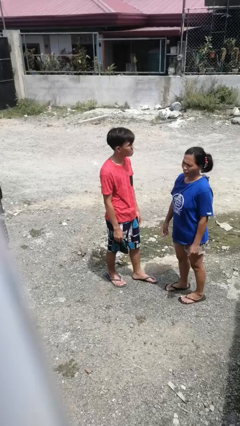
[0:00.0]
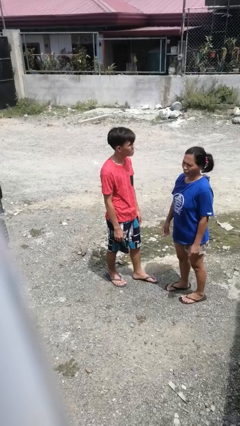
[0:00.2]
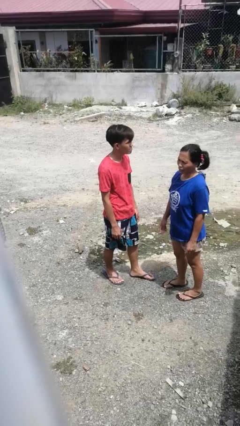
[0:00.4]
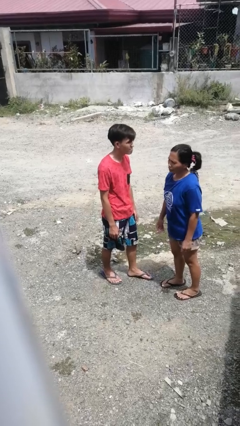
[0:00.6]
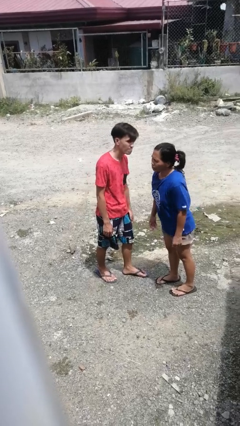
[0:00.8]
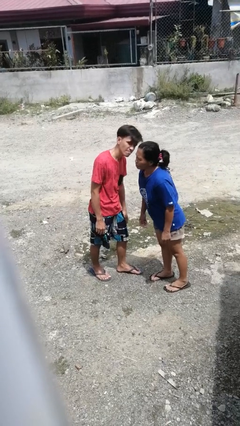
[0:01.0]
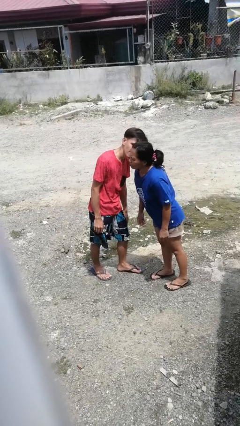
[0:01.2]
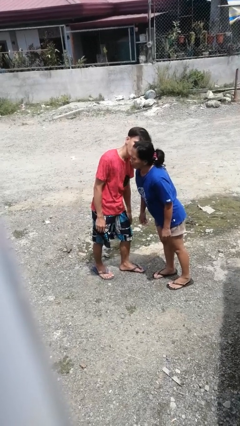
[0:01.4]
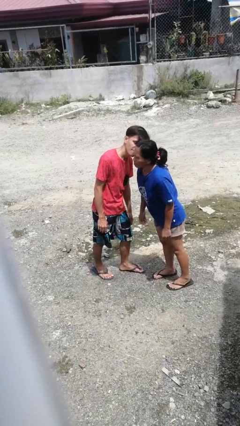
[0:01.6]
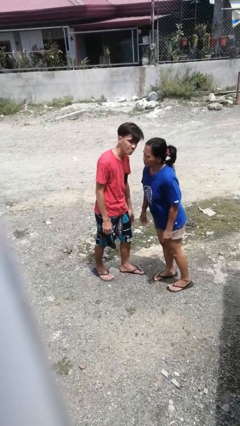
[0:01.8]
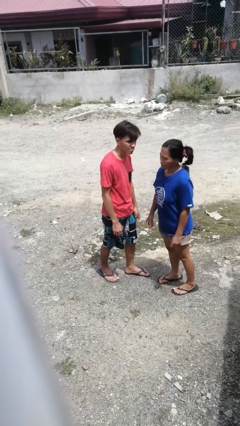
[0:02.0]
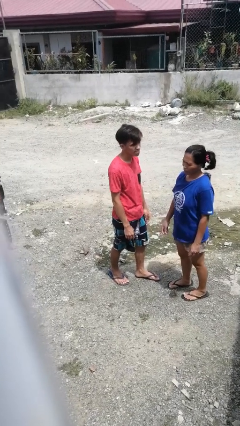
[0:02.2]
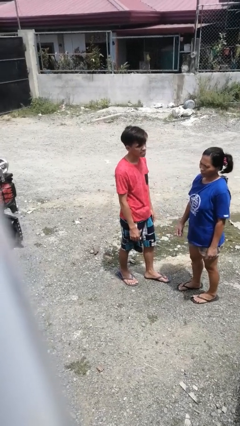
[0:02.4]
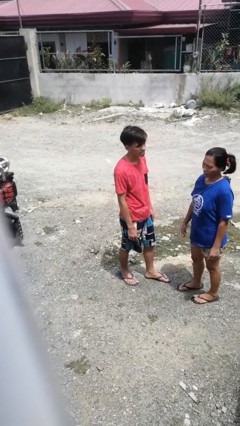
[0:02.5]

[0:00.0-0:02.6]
person kisses cheek of person

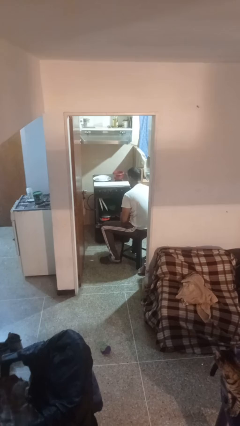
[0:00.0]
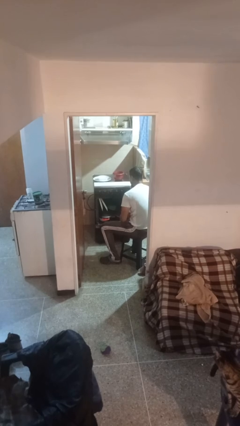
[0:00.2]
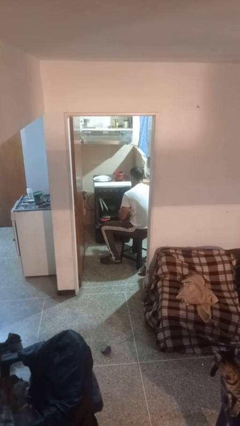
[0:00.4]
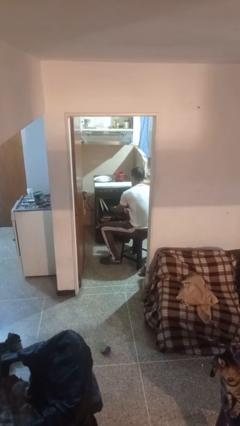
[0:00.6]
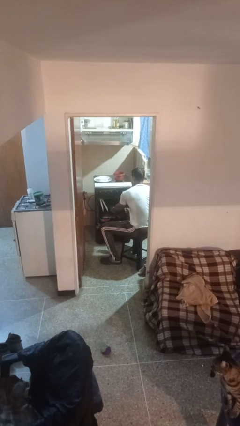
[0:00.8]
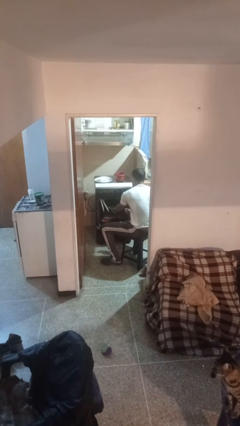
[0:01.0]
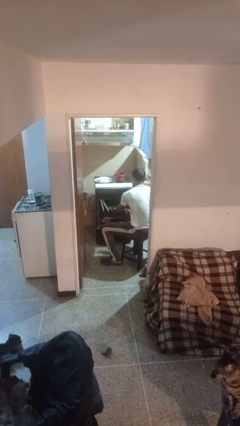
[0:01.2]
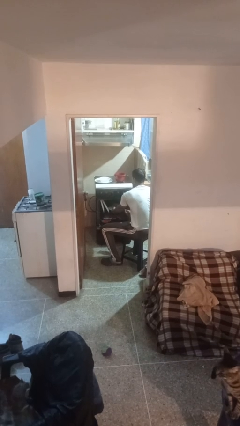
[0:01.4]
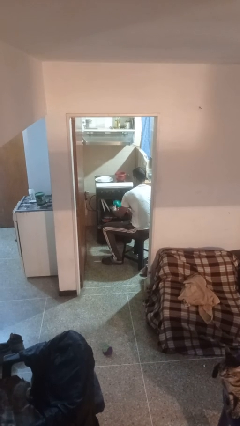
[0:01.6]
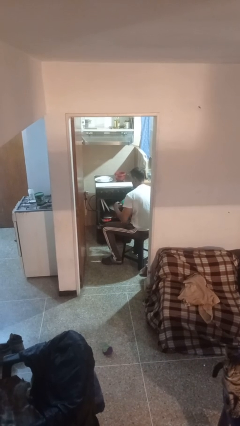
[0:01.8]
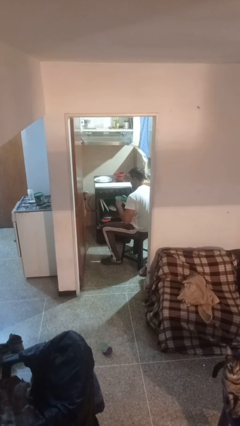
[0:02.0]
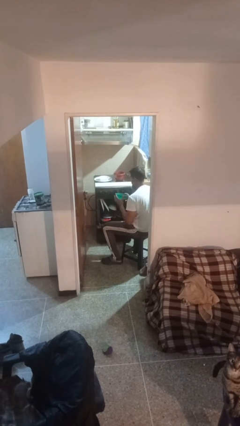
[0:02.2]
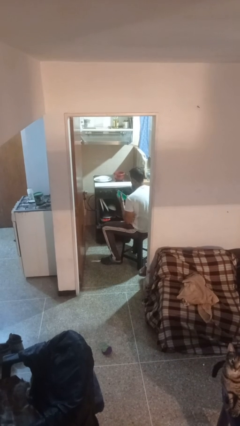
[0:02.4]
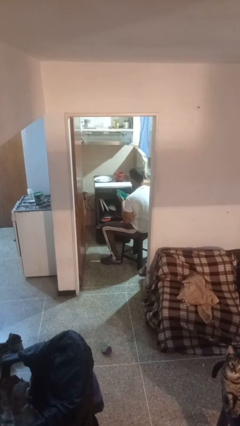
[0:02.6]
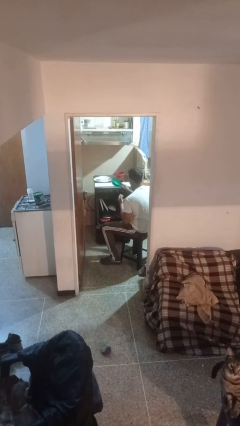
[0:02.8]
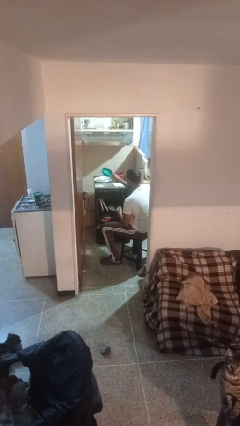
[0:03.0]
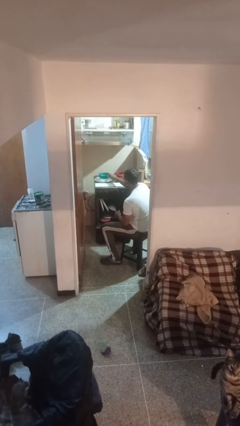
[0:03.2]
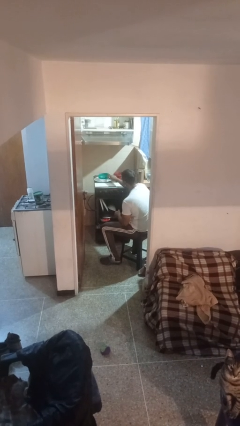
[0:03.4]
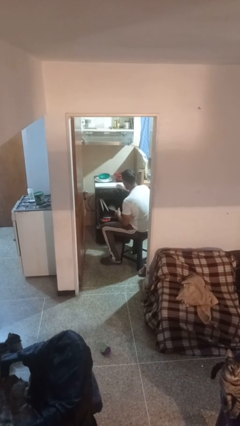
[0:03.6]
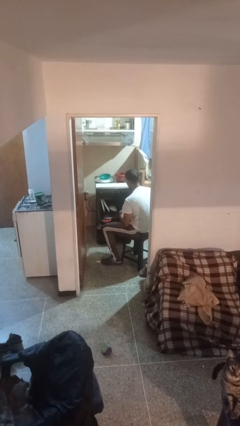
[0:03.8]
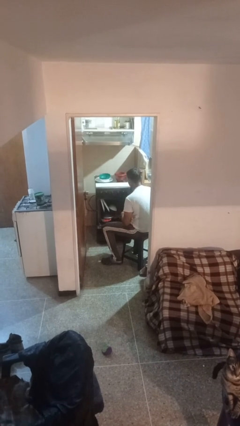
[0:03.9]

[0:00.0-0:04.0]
person unloads dishwasher

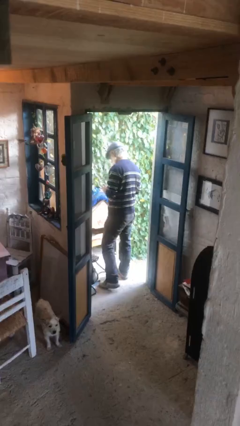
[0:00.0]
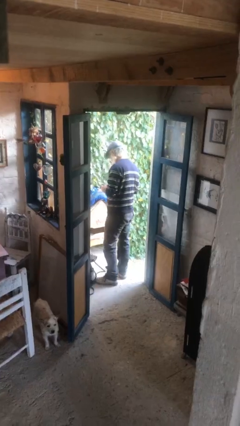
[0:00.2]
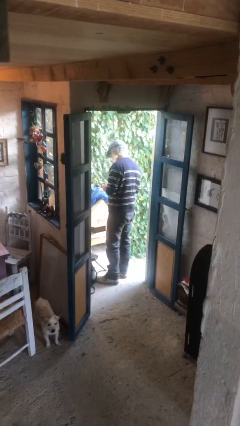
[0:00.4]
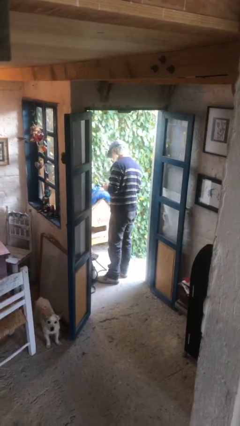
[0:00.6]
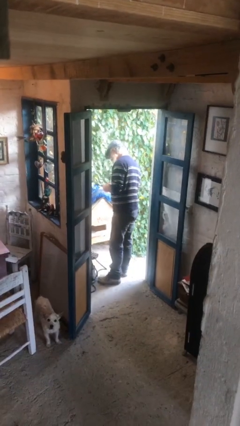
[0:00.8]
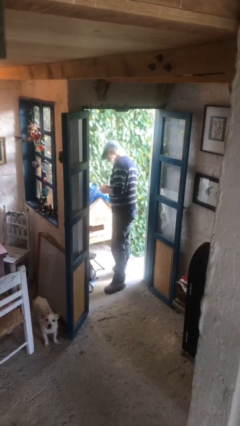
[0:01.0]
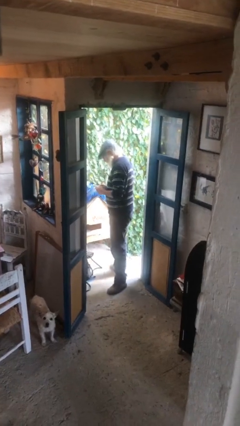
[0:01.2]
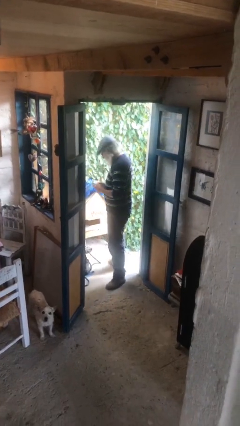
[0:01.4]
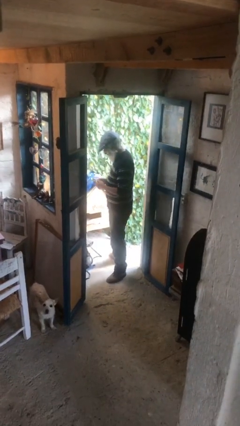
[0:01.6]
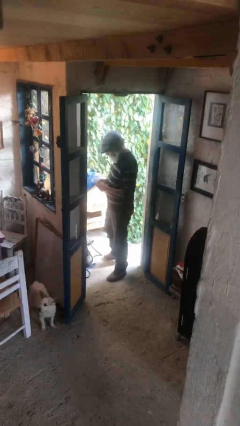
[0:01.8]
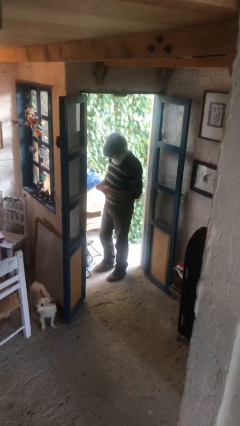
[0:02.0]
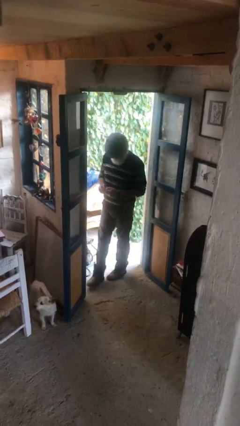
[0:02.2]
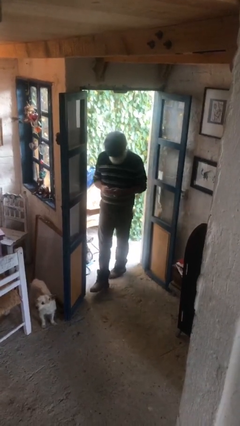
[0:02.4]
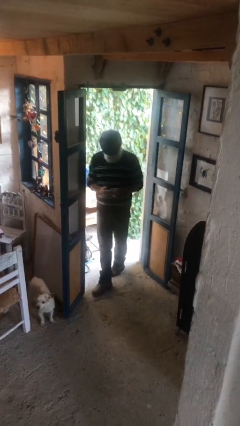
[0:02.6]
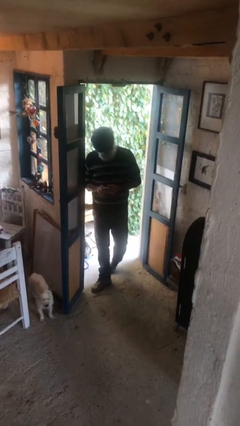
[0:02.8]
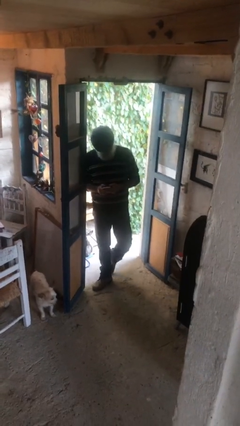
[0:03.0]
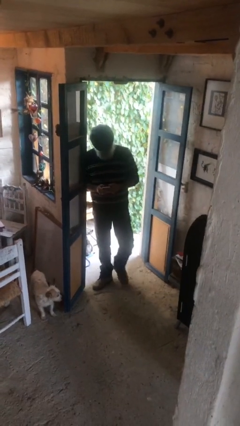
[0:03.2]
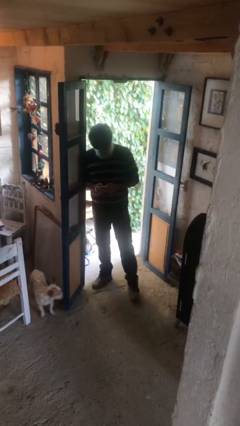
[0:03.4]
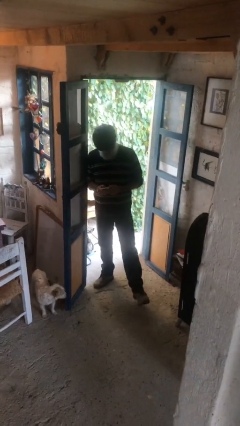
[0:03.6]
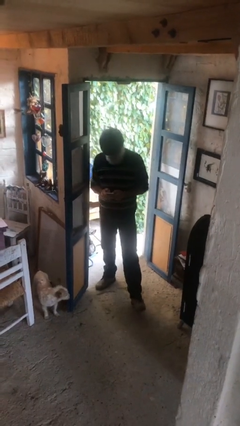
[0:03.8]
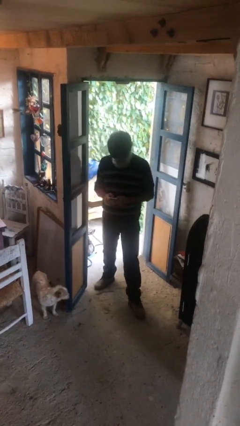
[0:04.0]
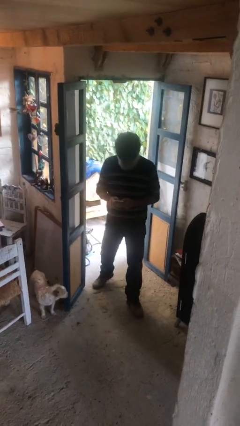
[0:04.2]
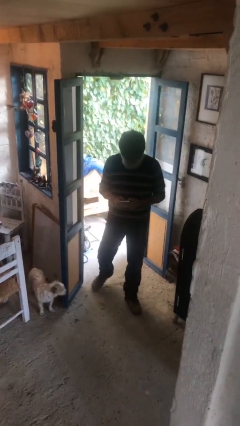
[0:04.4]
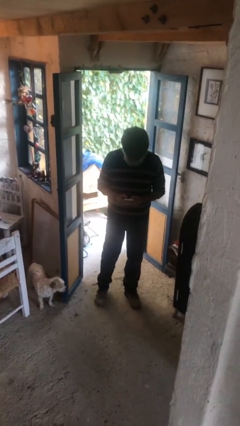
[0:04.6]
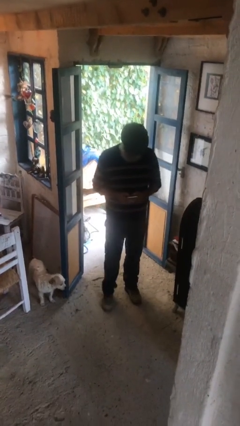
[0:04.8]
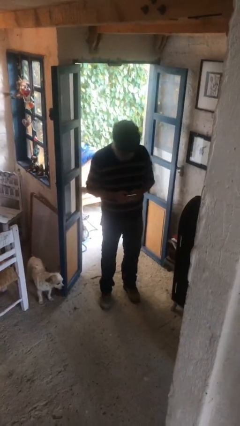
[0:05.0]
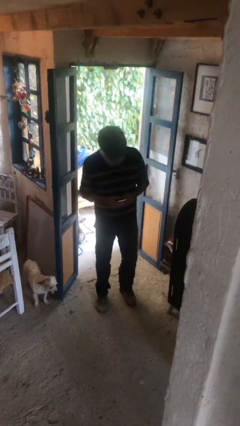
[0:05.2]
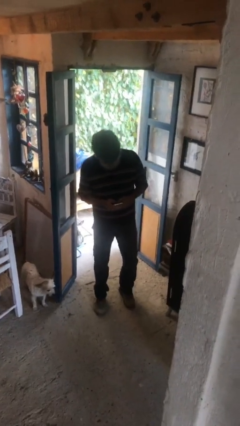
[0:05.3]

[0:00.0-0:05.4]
person enters scene through structure

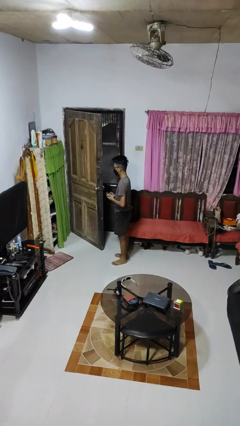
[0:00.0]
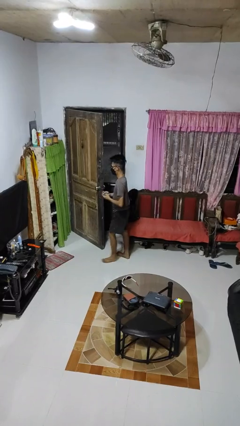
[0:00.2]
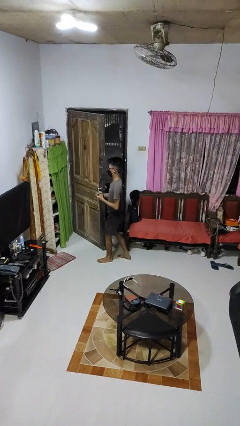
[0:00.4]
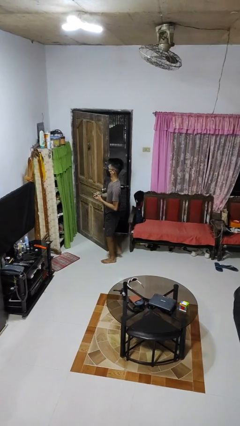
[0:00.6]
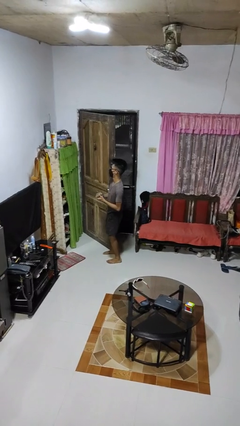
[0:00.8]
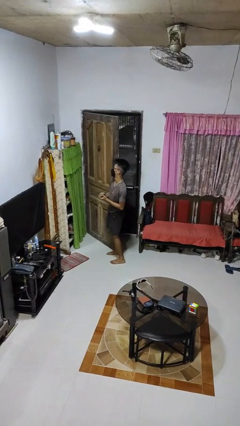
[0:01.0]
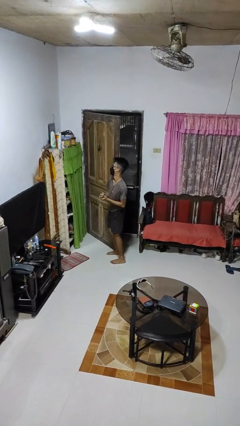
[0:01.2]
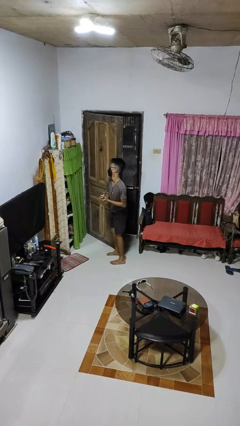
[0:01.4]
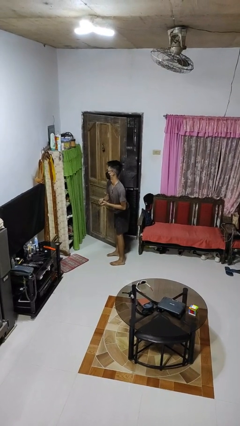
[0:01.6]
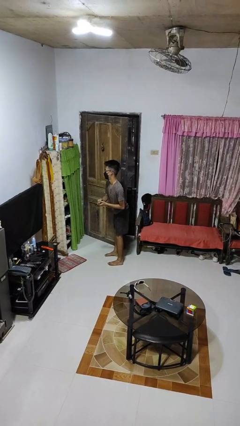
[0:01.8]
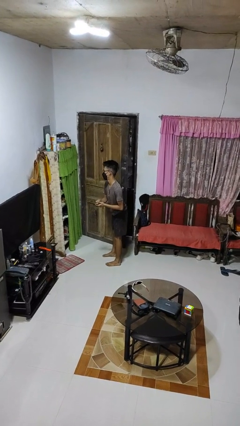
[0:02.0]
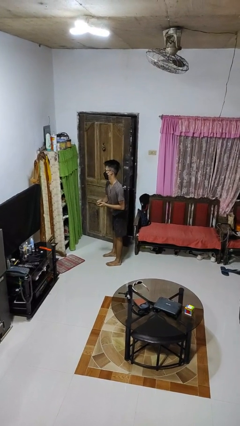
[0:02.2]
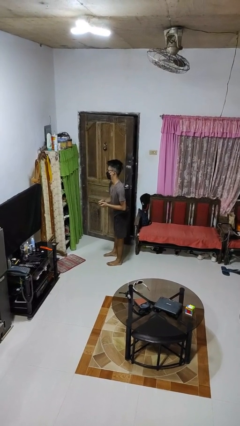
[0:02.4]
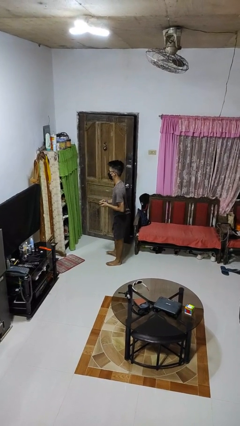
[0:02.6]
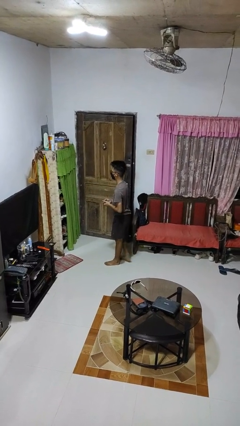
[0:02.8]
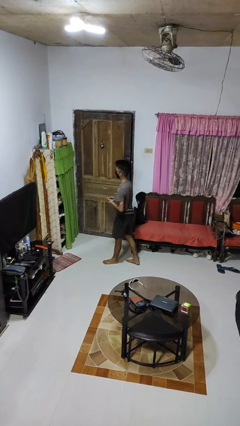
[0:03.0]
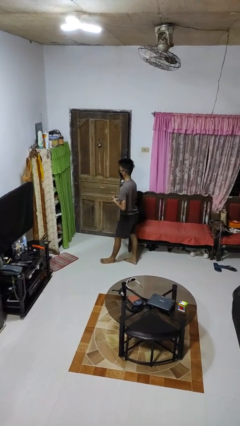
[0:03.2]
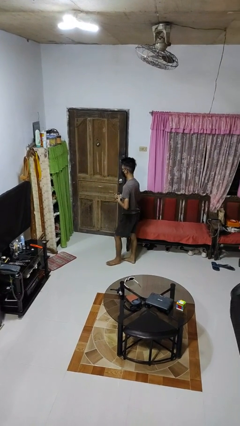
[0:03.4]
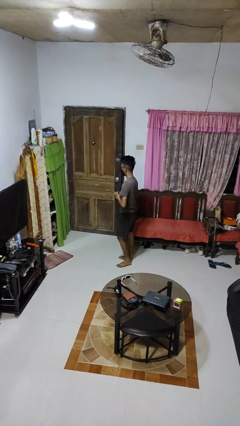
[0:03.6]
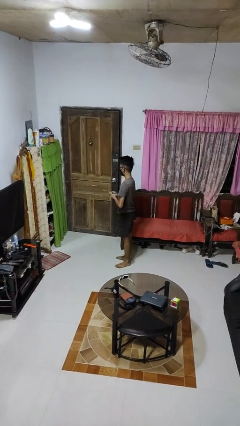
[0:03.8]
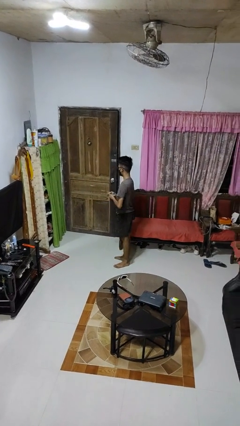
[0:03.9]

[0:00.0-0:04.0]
person closes door with hip

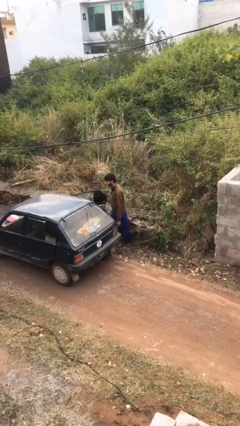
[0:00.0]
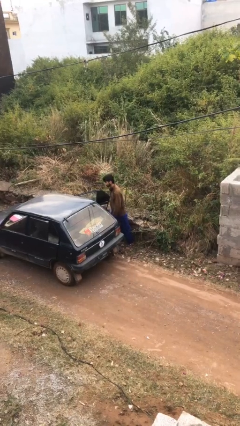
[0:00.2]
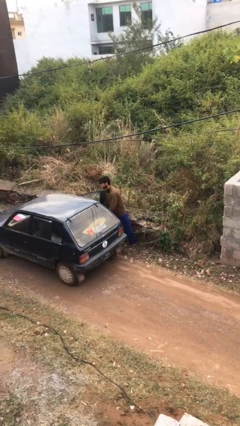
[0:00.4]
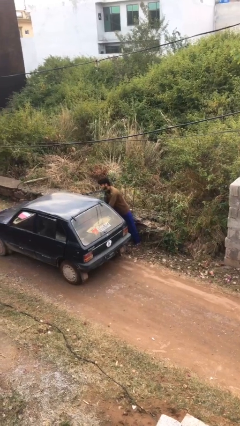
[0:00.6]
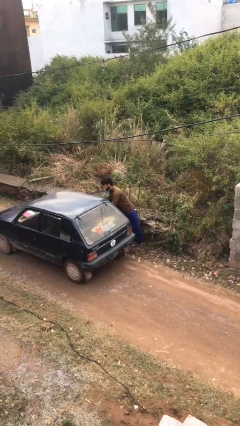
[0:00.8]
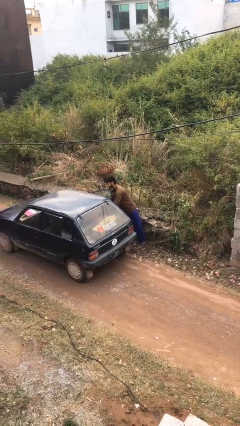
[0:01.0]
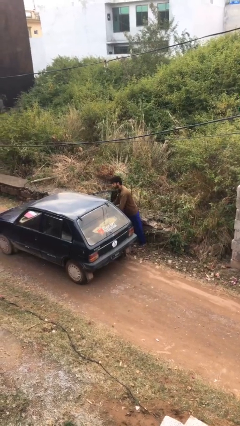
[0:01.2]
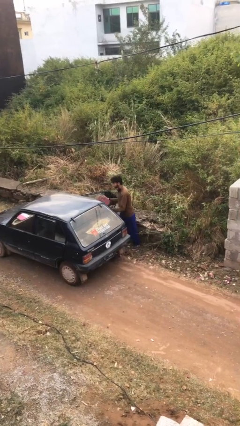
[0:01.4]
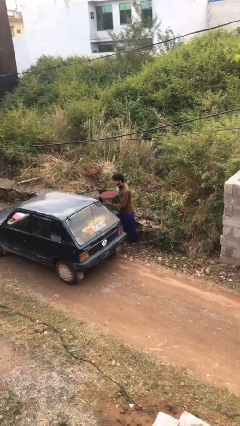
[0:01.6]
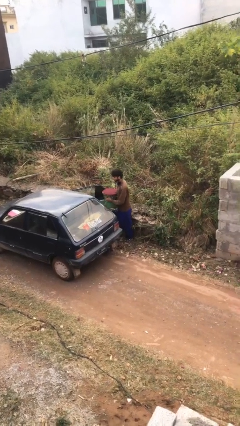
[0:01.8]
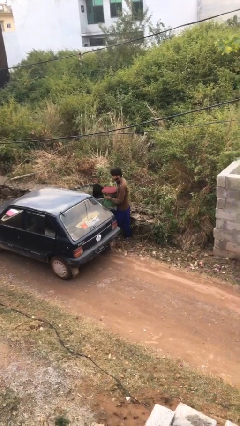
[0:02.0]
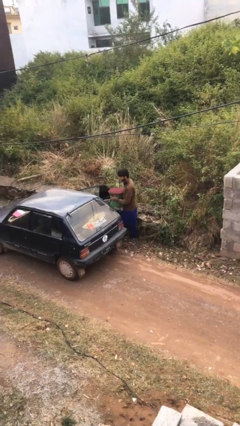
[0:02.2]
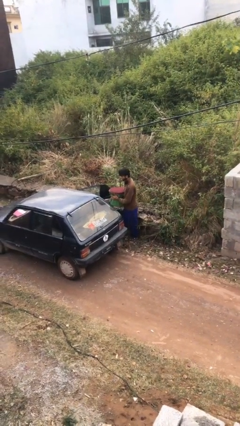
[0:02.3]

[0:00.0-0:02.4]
person unloads car
